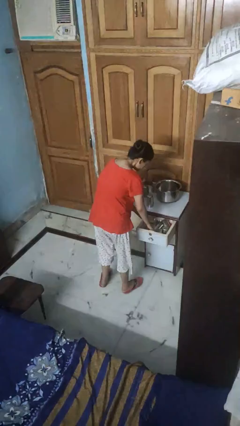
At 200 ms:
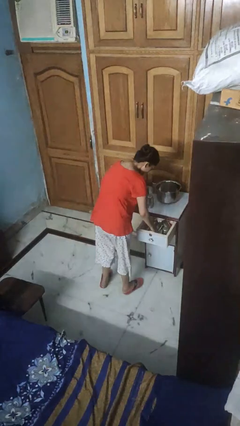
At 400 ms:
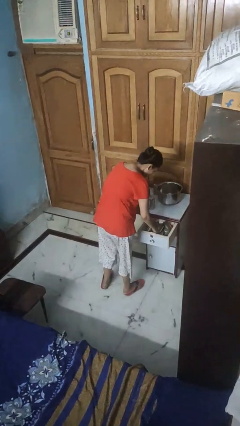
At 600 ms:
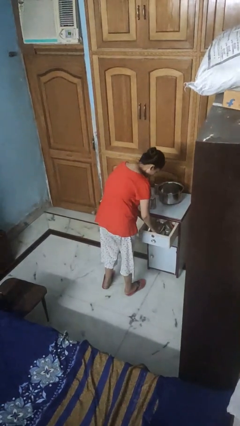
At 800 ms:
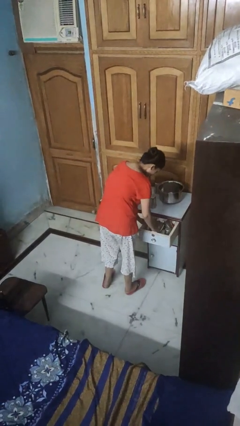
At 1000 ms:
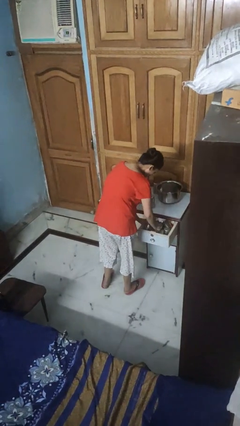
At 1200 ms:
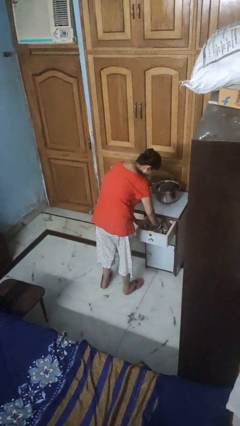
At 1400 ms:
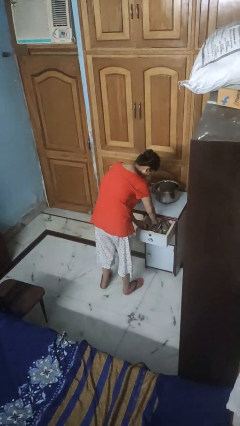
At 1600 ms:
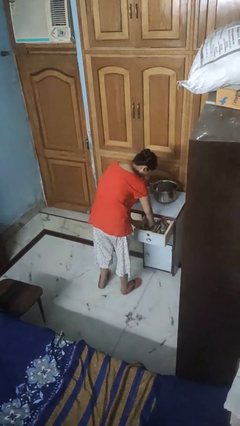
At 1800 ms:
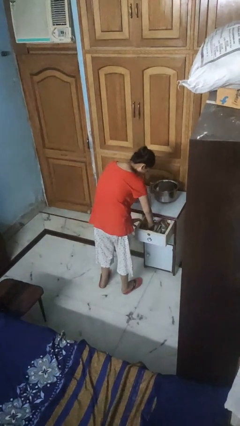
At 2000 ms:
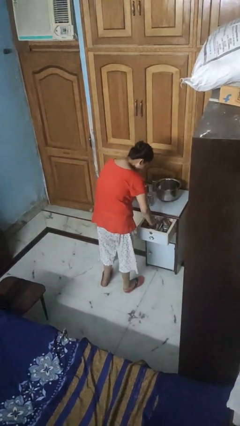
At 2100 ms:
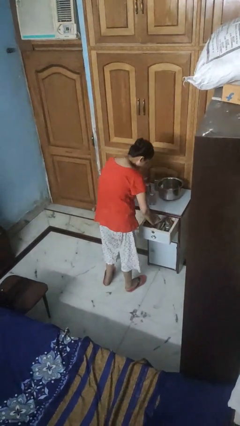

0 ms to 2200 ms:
person searches in kitchen drawer

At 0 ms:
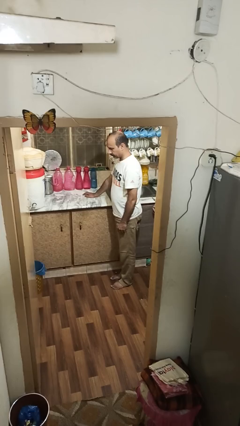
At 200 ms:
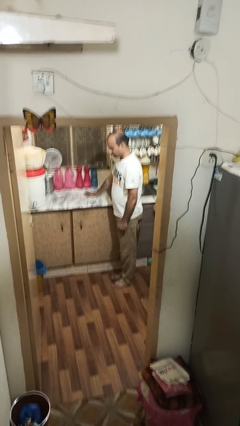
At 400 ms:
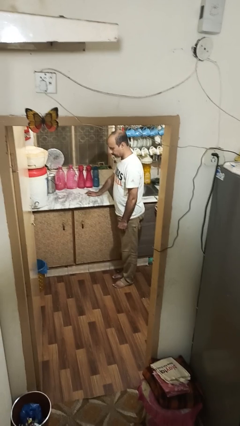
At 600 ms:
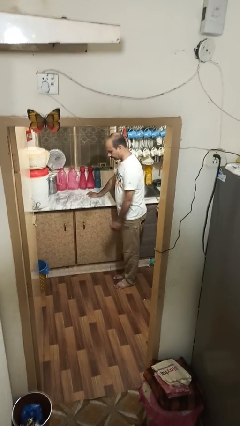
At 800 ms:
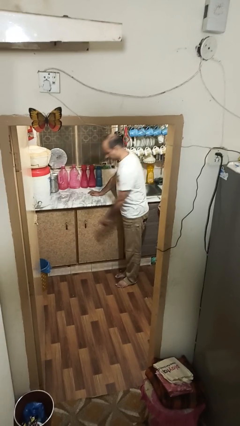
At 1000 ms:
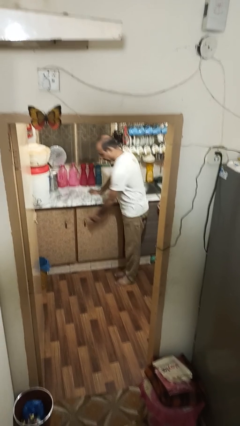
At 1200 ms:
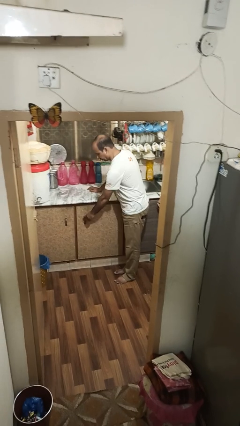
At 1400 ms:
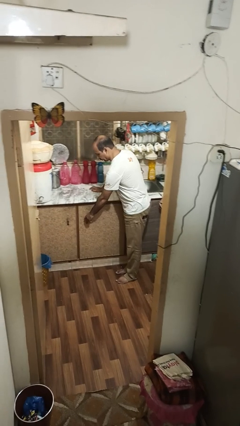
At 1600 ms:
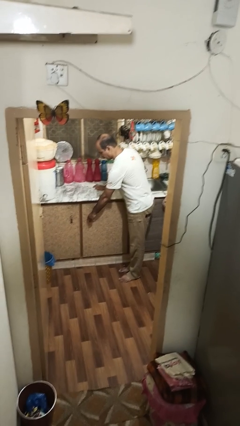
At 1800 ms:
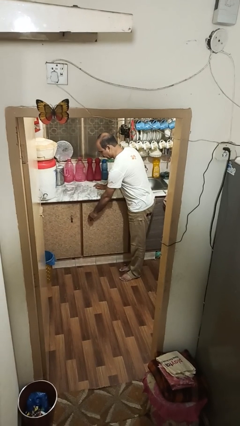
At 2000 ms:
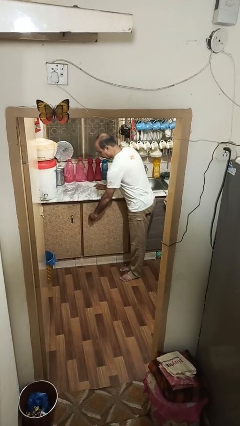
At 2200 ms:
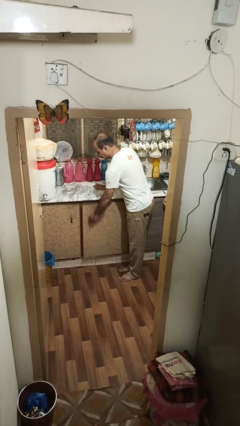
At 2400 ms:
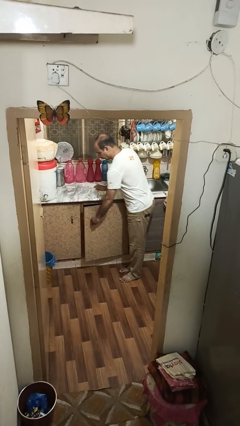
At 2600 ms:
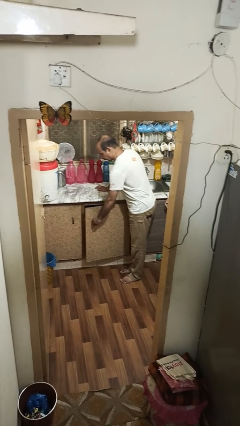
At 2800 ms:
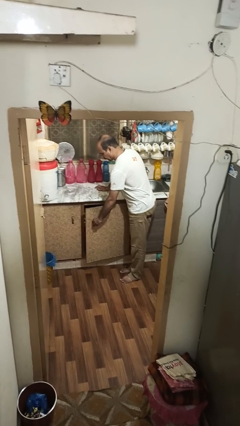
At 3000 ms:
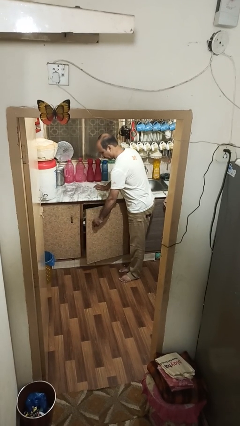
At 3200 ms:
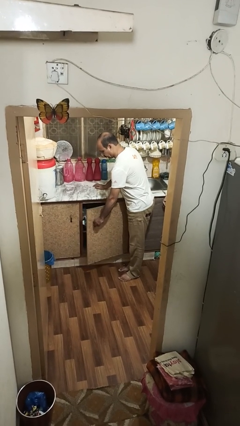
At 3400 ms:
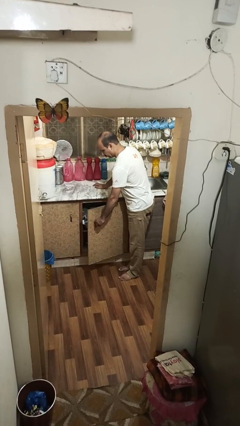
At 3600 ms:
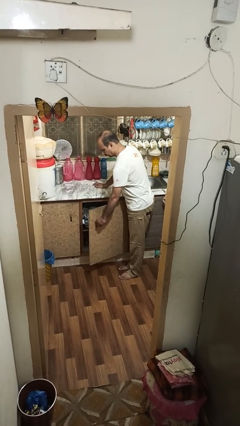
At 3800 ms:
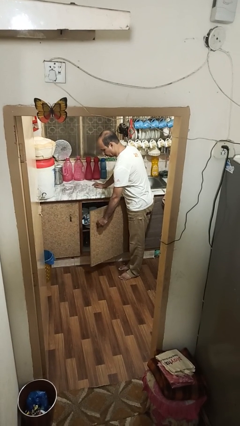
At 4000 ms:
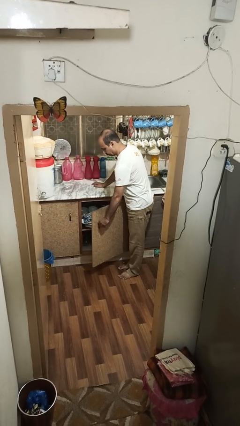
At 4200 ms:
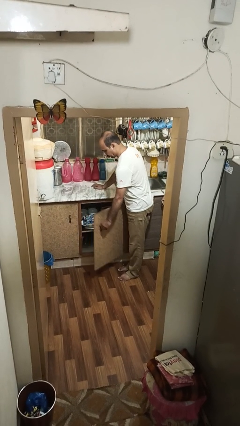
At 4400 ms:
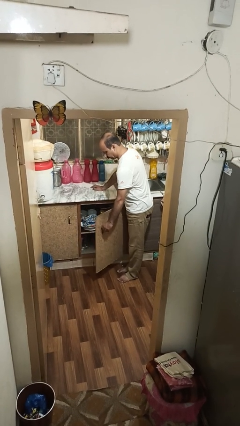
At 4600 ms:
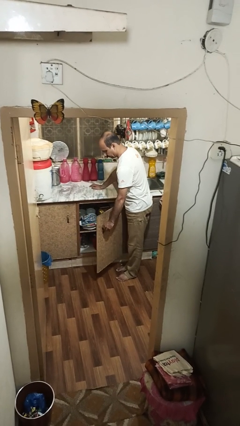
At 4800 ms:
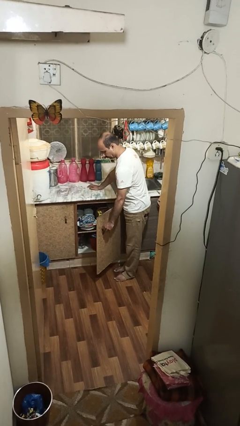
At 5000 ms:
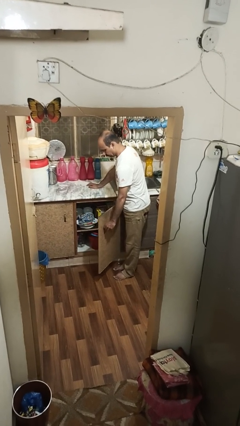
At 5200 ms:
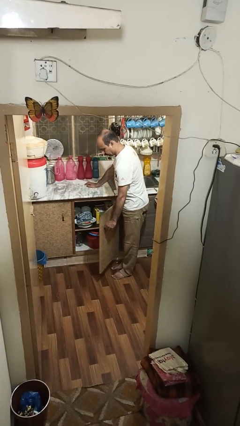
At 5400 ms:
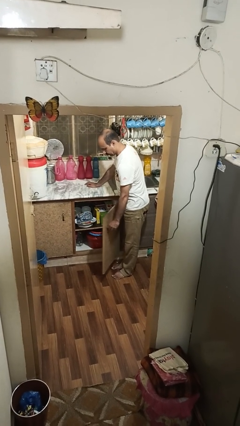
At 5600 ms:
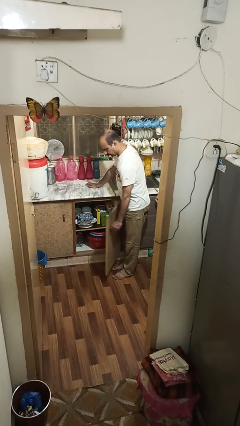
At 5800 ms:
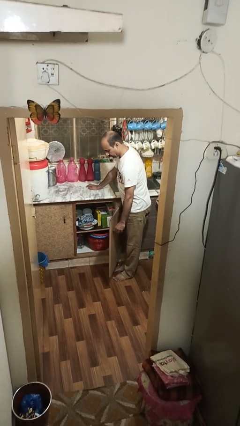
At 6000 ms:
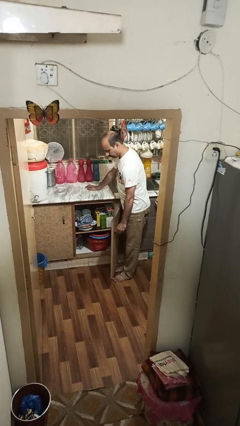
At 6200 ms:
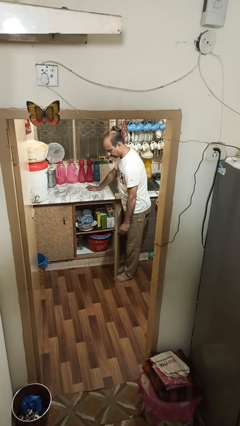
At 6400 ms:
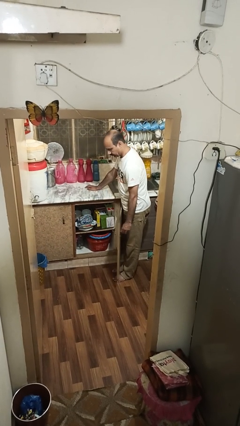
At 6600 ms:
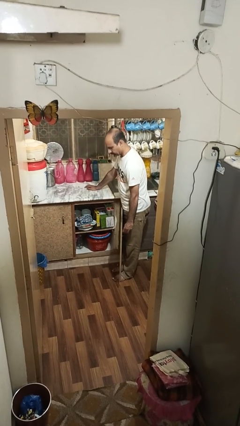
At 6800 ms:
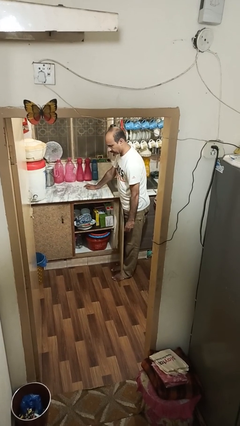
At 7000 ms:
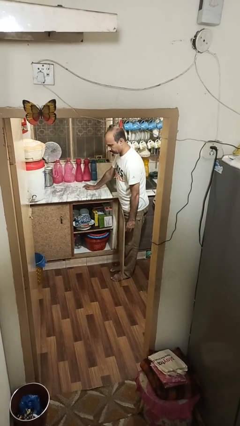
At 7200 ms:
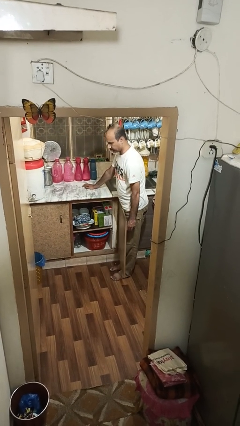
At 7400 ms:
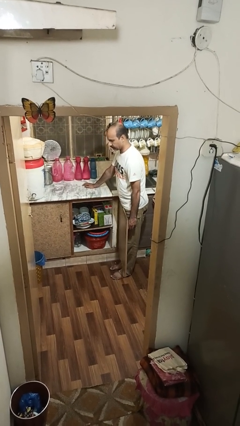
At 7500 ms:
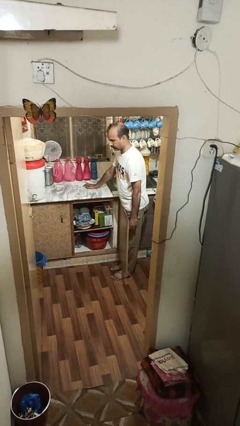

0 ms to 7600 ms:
person opens cabinet

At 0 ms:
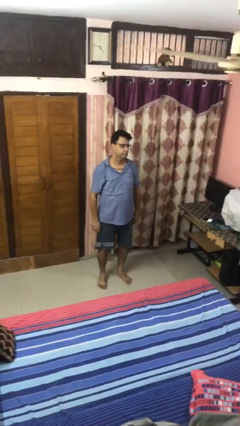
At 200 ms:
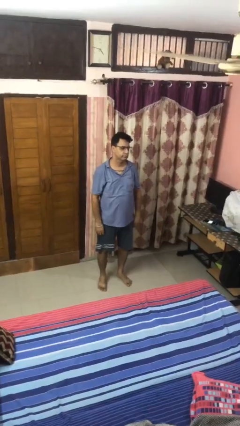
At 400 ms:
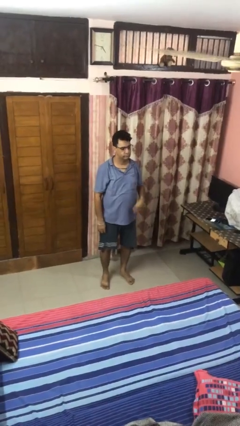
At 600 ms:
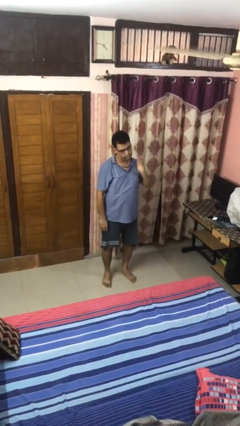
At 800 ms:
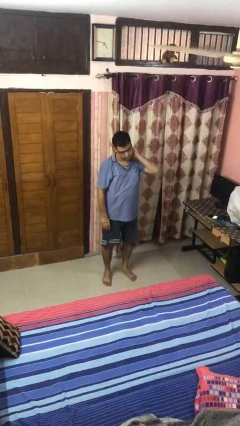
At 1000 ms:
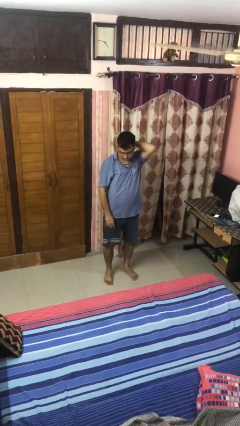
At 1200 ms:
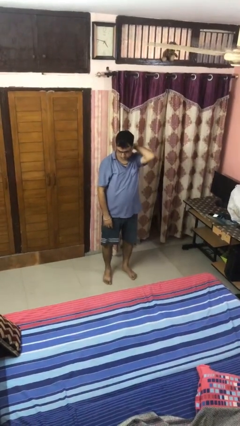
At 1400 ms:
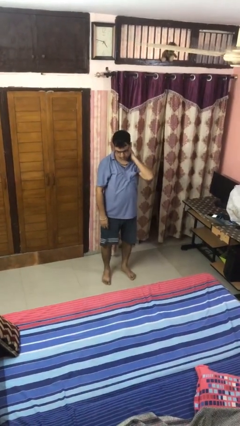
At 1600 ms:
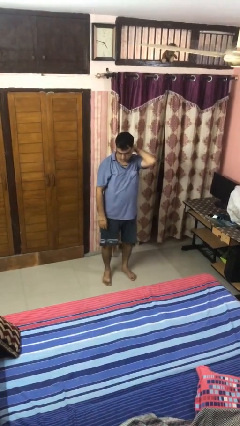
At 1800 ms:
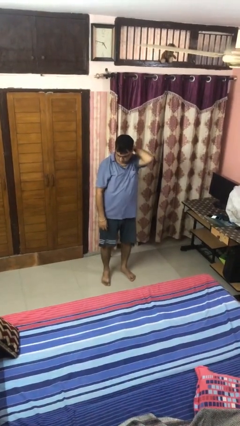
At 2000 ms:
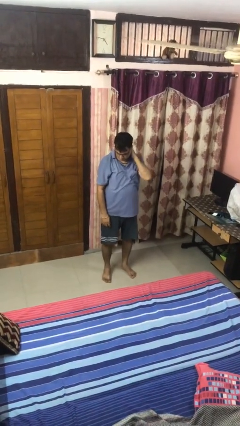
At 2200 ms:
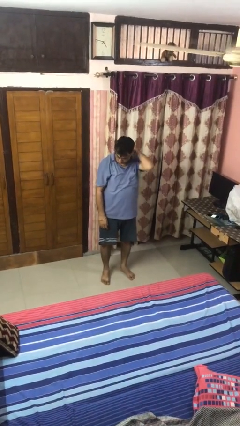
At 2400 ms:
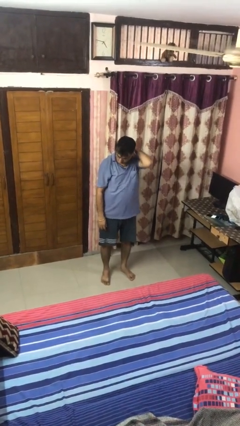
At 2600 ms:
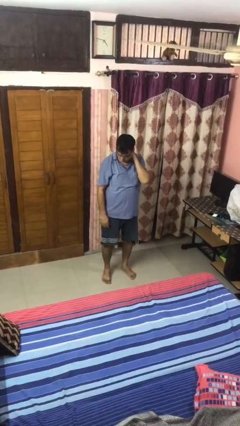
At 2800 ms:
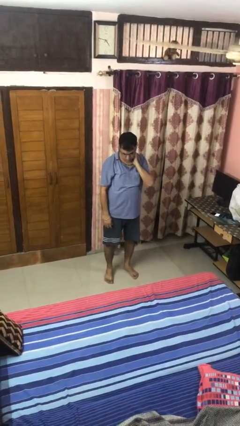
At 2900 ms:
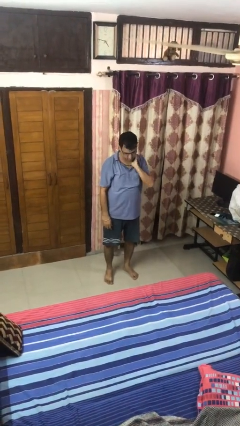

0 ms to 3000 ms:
person rubs neck

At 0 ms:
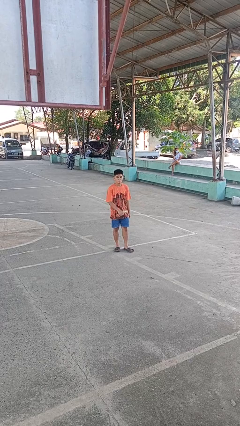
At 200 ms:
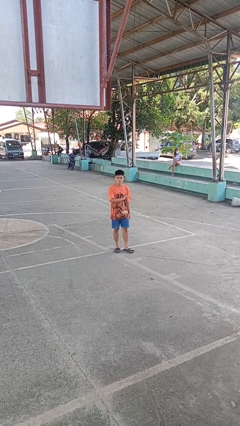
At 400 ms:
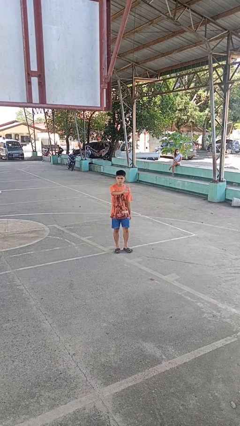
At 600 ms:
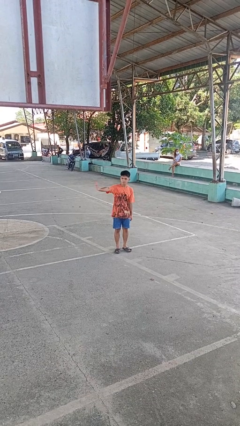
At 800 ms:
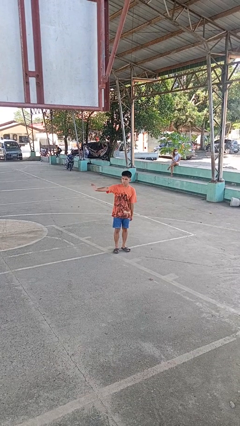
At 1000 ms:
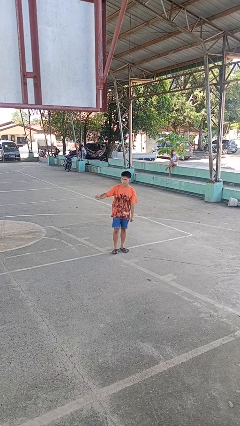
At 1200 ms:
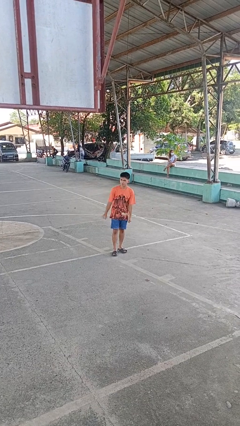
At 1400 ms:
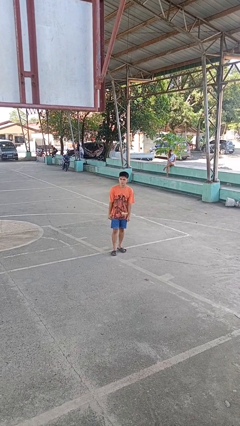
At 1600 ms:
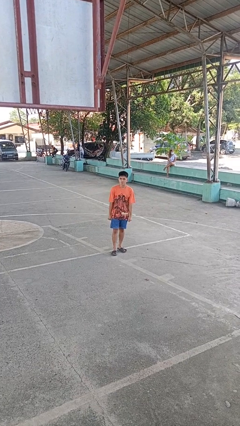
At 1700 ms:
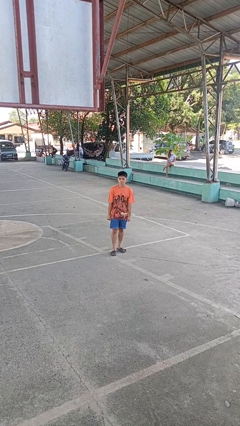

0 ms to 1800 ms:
person gestures swipe right

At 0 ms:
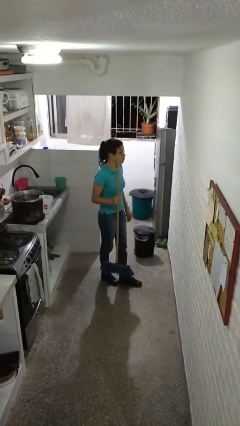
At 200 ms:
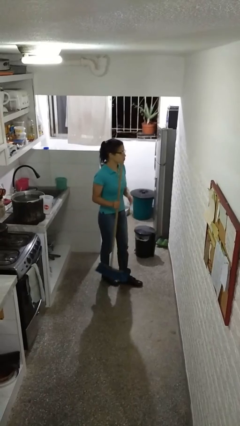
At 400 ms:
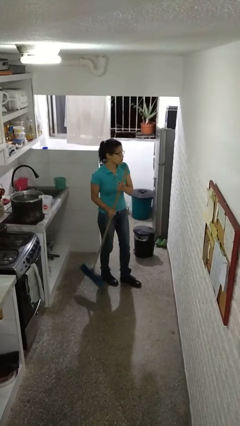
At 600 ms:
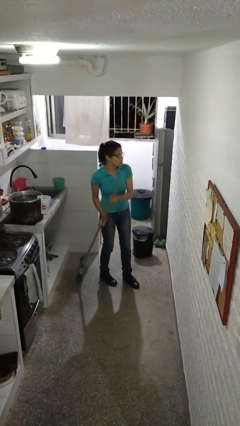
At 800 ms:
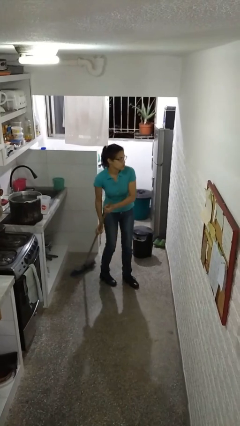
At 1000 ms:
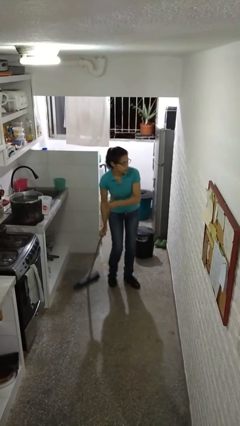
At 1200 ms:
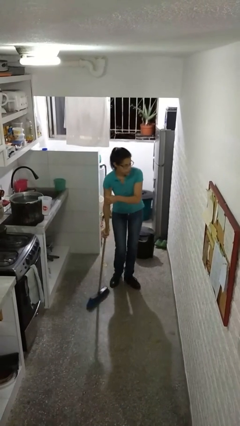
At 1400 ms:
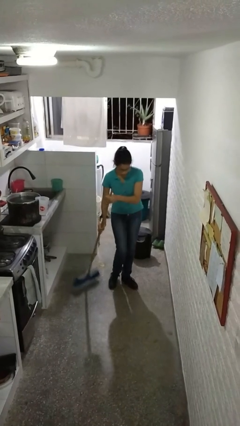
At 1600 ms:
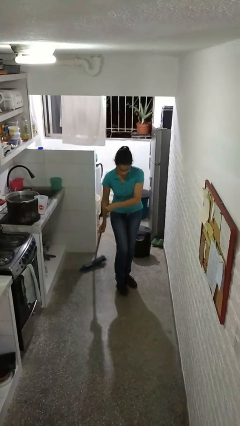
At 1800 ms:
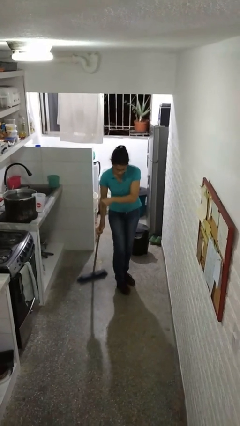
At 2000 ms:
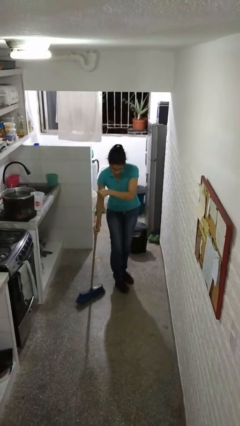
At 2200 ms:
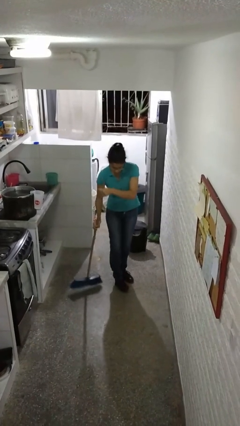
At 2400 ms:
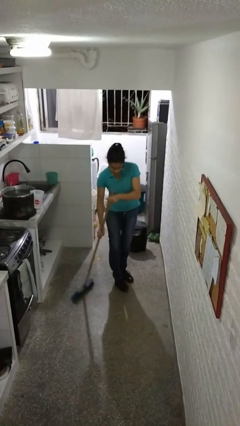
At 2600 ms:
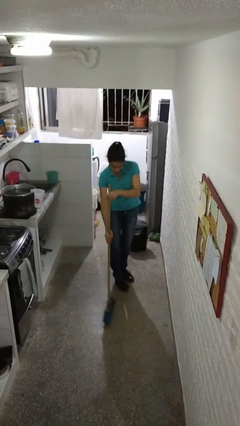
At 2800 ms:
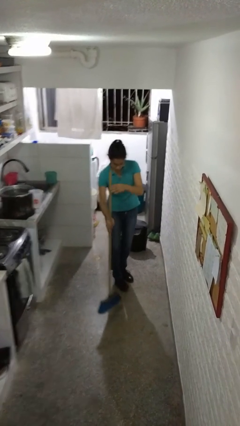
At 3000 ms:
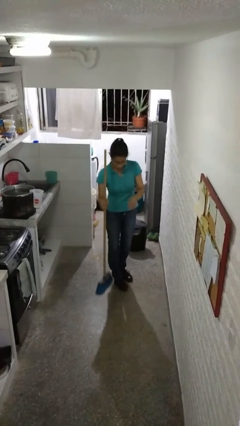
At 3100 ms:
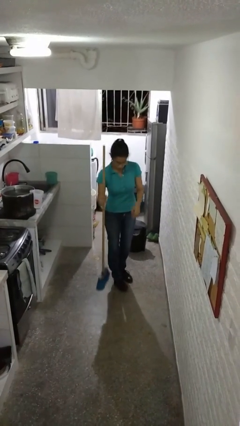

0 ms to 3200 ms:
person sweeps floor
